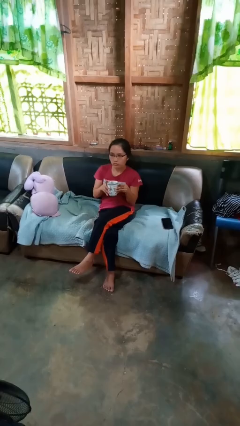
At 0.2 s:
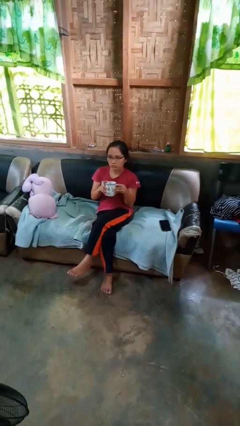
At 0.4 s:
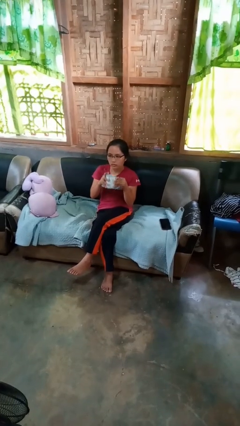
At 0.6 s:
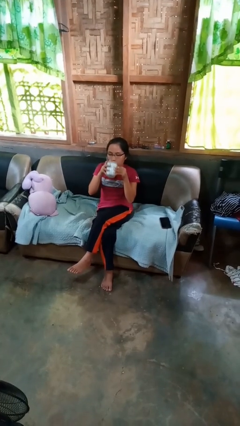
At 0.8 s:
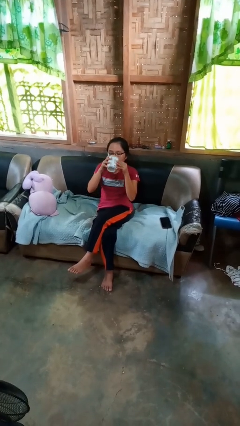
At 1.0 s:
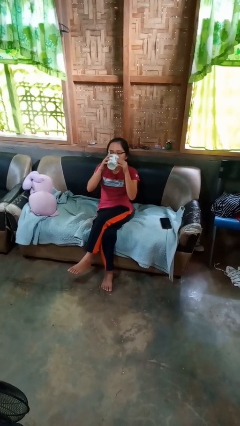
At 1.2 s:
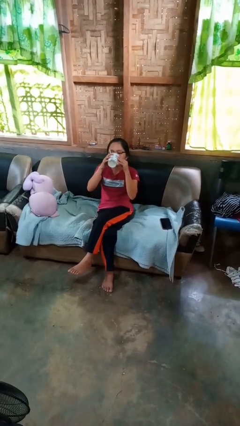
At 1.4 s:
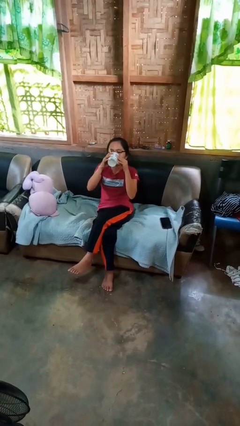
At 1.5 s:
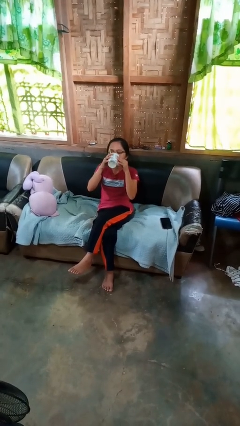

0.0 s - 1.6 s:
person drinks from mug

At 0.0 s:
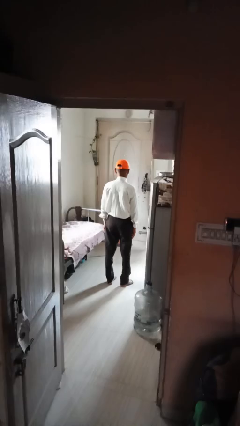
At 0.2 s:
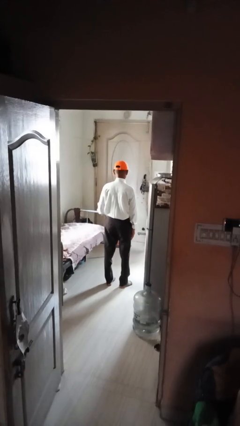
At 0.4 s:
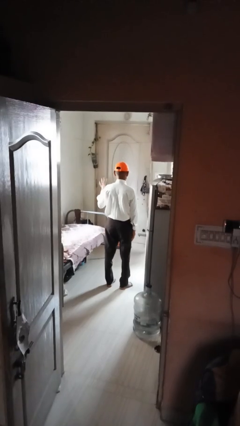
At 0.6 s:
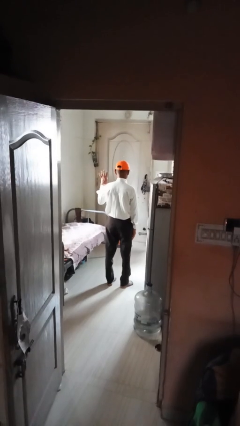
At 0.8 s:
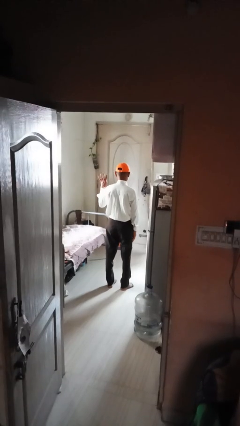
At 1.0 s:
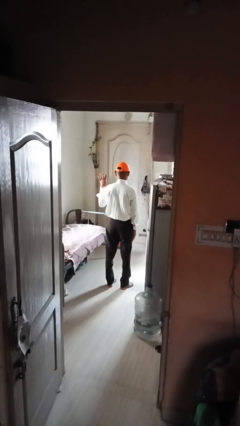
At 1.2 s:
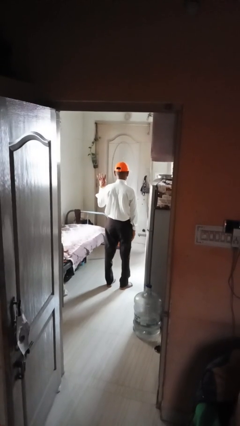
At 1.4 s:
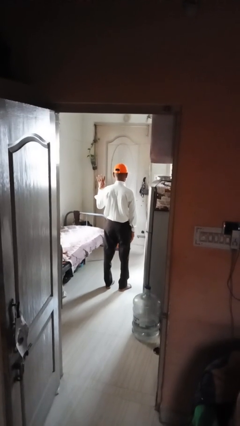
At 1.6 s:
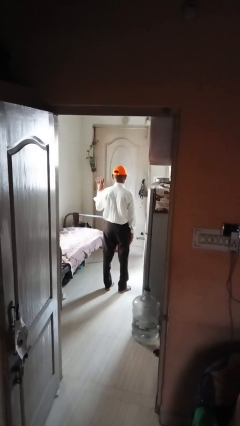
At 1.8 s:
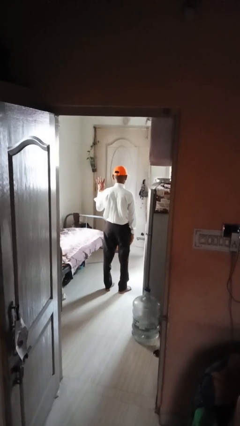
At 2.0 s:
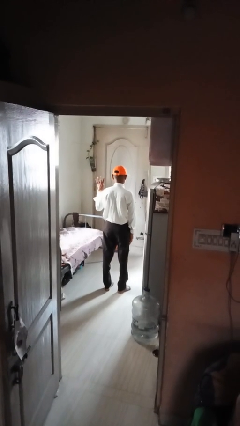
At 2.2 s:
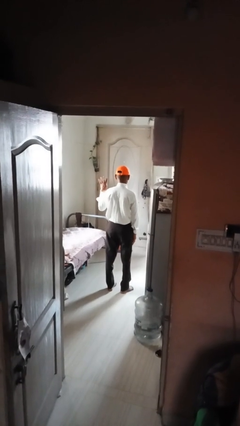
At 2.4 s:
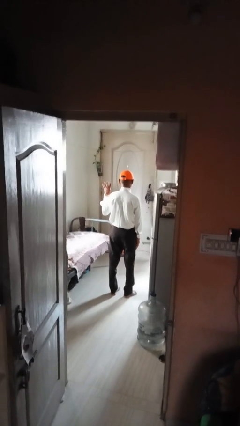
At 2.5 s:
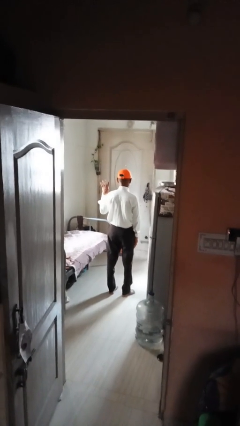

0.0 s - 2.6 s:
person gestures number four

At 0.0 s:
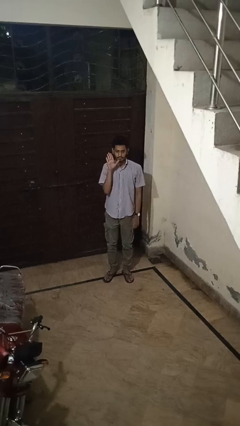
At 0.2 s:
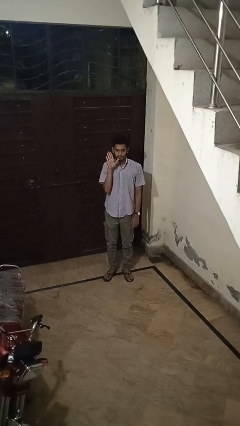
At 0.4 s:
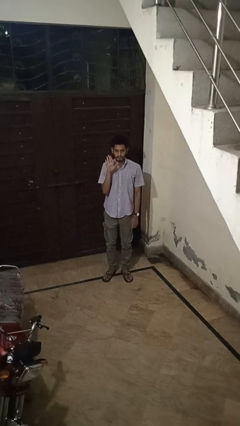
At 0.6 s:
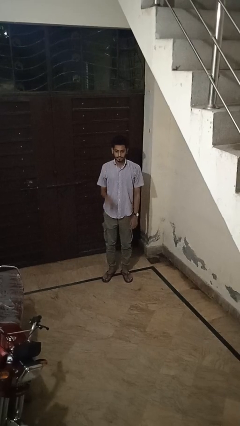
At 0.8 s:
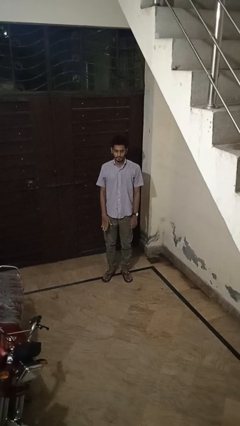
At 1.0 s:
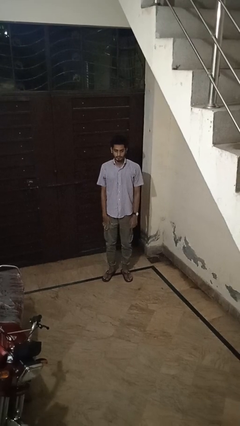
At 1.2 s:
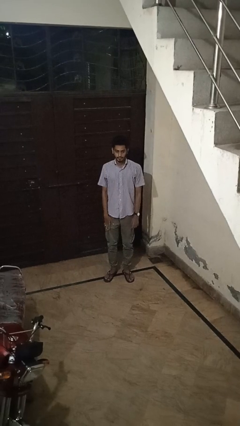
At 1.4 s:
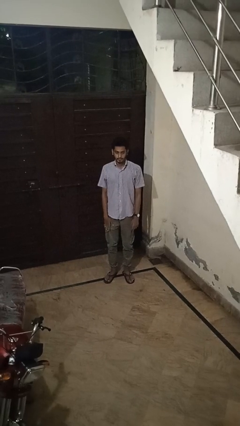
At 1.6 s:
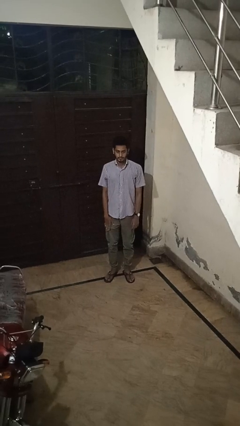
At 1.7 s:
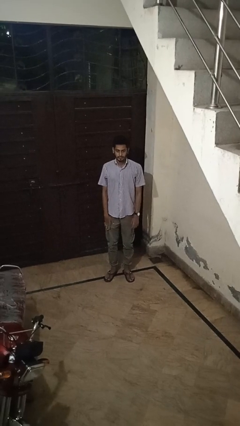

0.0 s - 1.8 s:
person gestures lower hand

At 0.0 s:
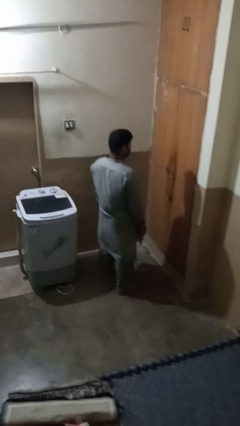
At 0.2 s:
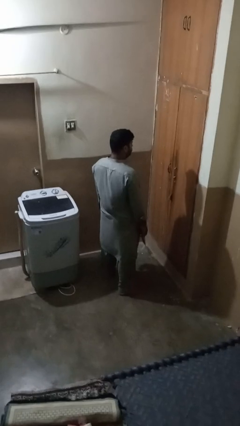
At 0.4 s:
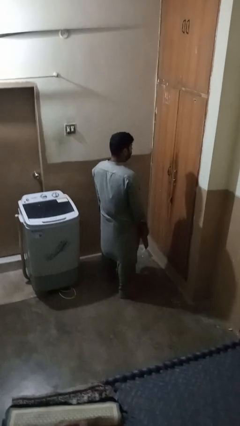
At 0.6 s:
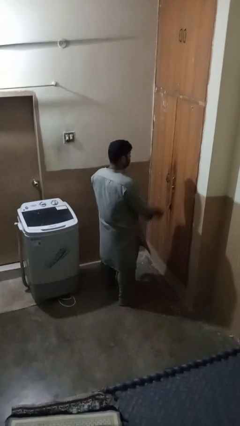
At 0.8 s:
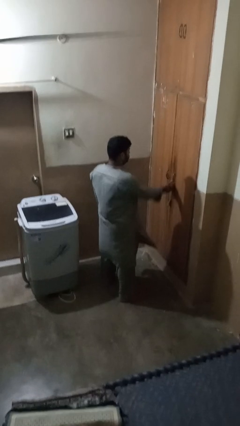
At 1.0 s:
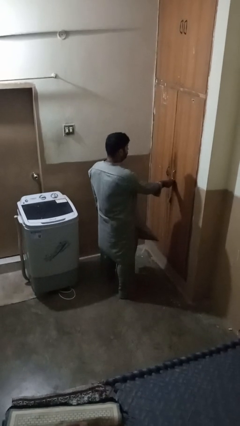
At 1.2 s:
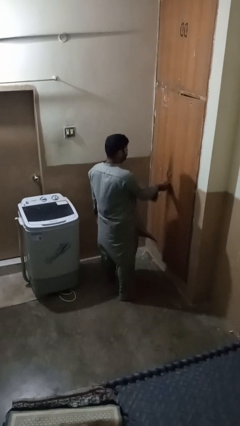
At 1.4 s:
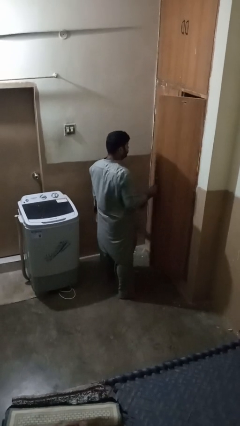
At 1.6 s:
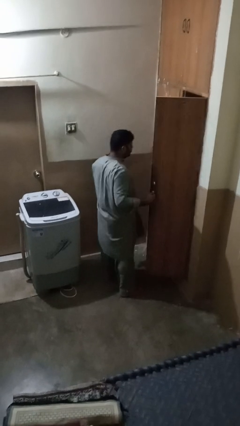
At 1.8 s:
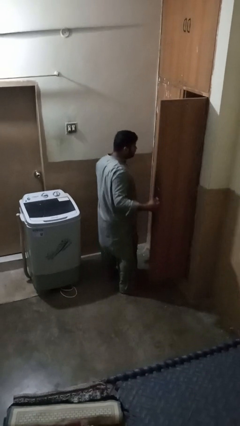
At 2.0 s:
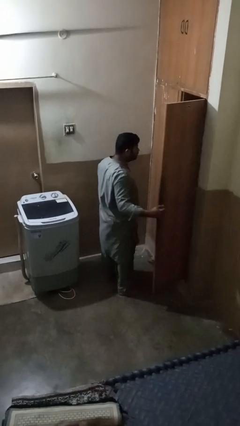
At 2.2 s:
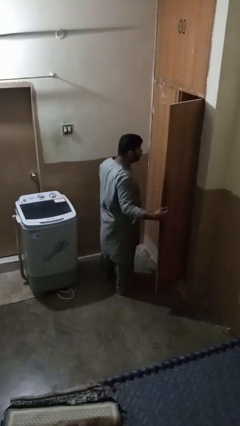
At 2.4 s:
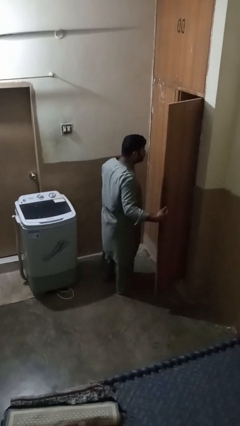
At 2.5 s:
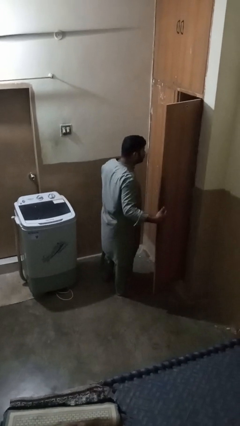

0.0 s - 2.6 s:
person opens closet door

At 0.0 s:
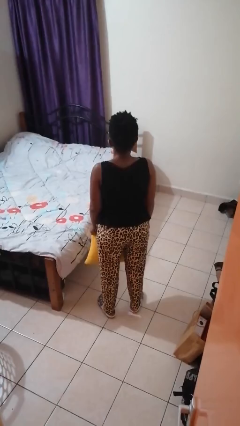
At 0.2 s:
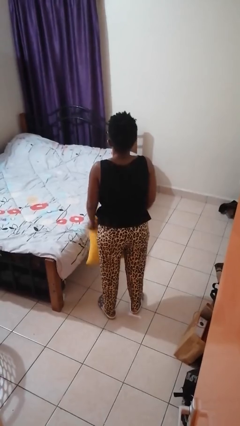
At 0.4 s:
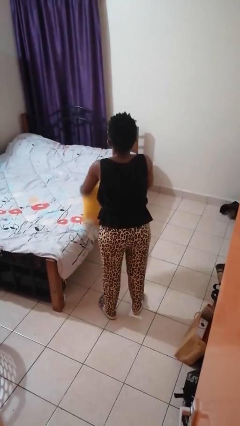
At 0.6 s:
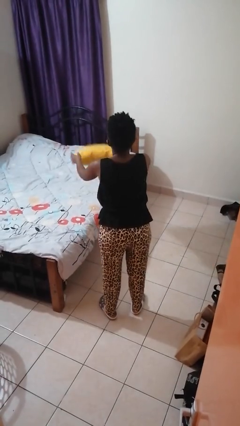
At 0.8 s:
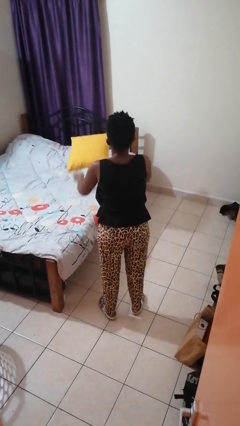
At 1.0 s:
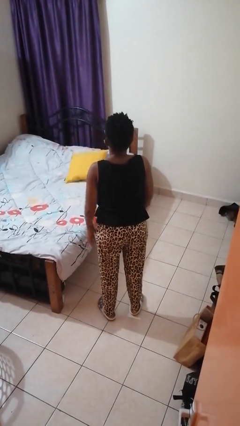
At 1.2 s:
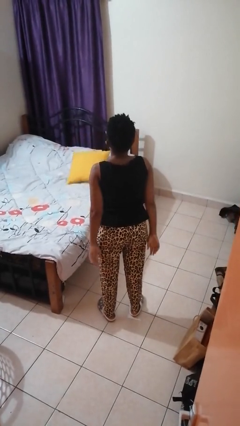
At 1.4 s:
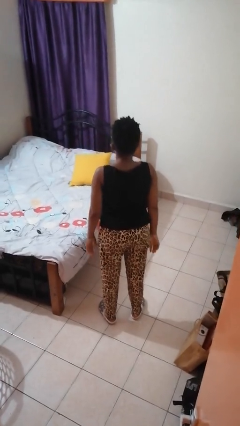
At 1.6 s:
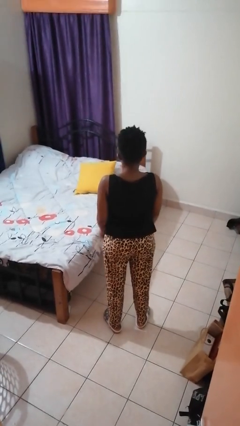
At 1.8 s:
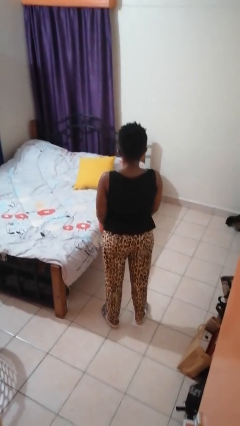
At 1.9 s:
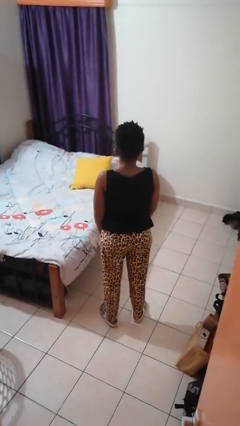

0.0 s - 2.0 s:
person throws object on bed

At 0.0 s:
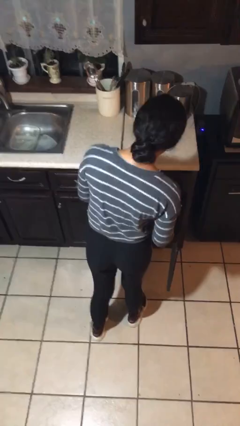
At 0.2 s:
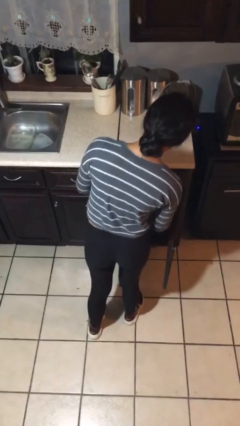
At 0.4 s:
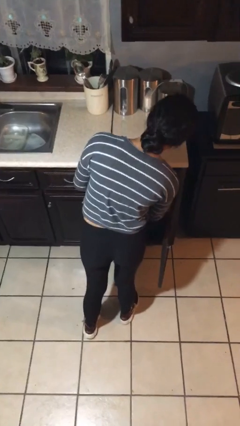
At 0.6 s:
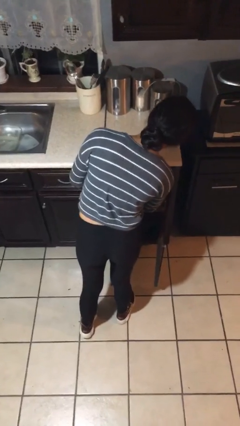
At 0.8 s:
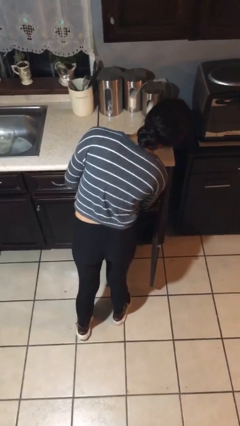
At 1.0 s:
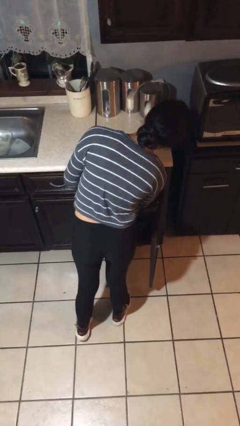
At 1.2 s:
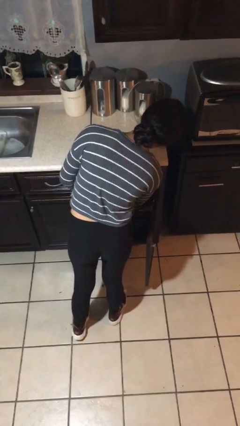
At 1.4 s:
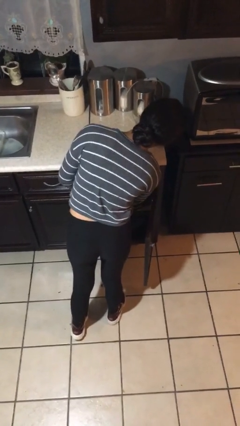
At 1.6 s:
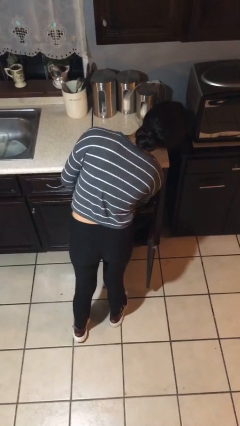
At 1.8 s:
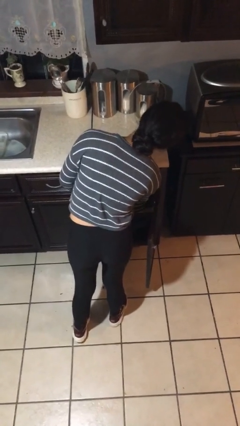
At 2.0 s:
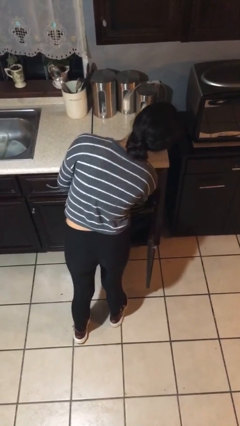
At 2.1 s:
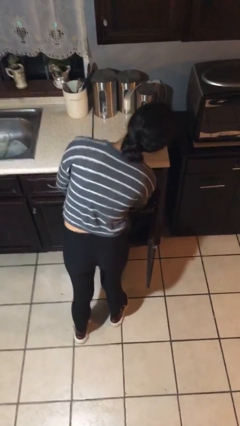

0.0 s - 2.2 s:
person takes object from cabinet

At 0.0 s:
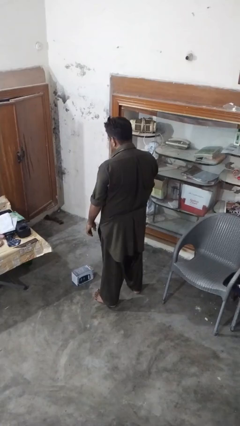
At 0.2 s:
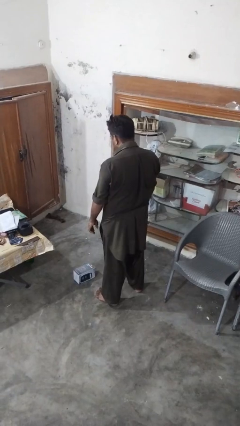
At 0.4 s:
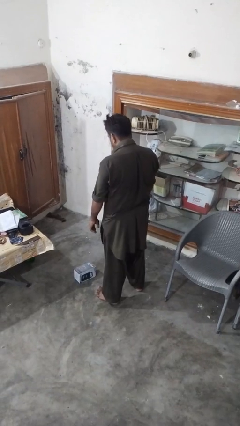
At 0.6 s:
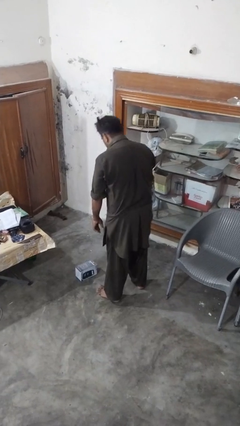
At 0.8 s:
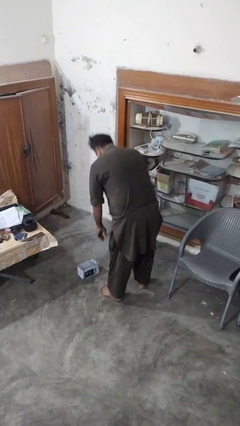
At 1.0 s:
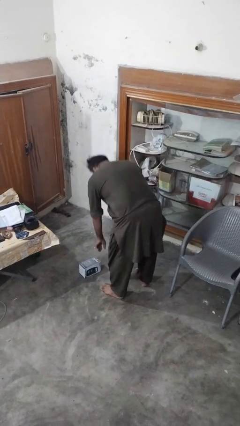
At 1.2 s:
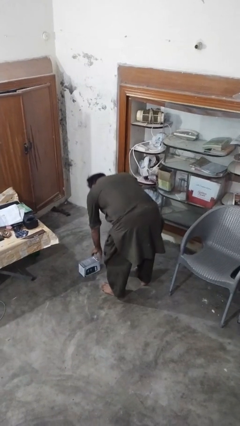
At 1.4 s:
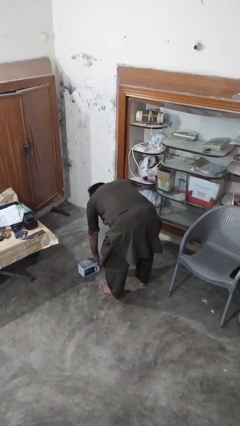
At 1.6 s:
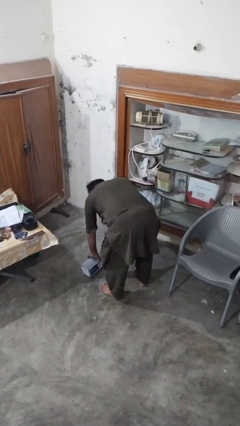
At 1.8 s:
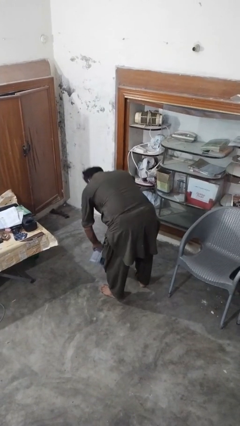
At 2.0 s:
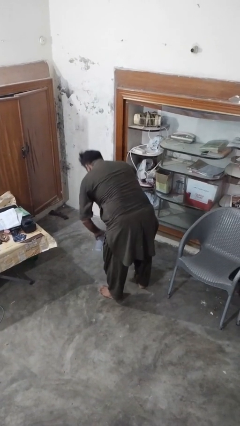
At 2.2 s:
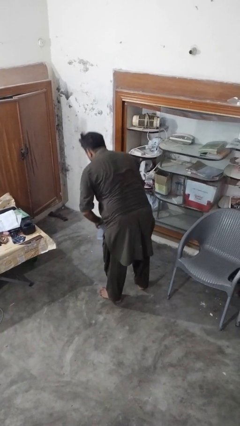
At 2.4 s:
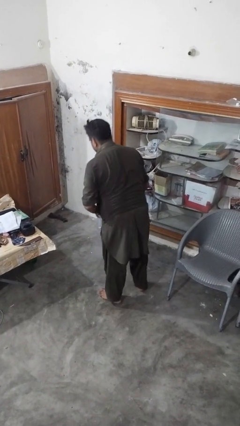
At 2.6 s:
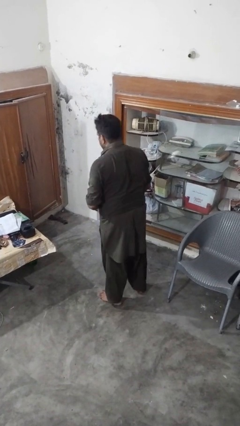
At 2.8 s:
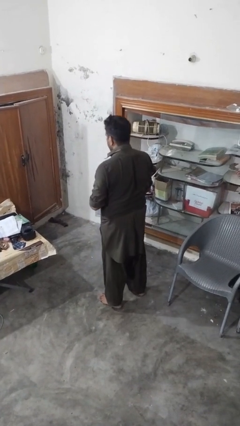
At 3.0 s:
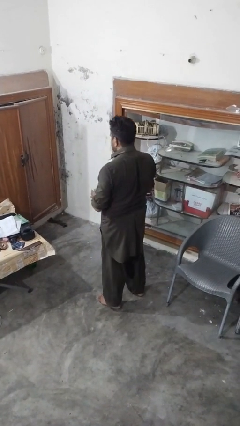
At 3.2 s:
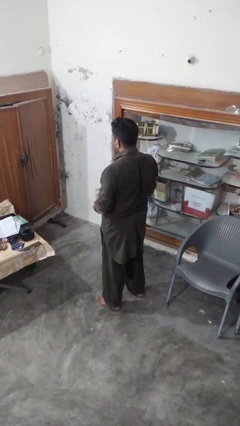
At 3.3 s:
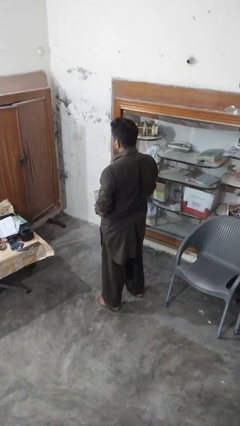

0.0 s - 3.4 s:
person picks up object from floor

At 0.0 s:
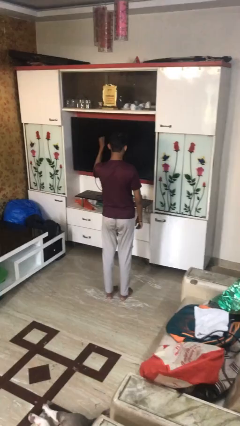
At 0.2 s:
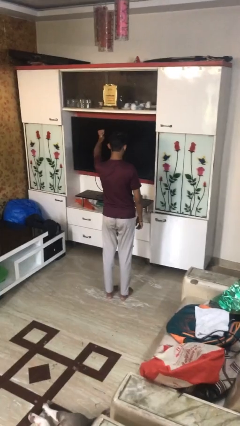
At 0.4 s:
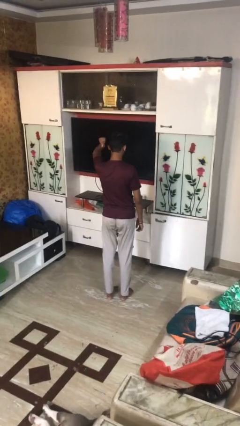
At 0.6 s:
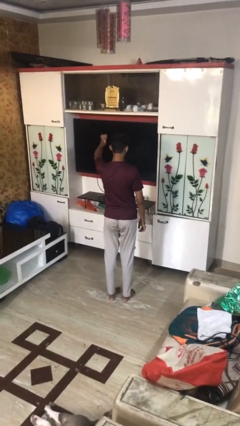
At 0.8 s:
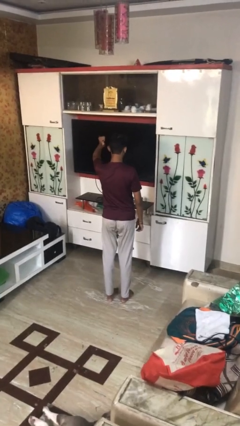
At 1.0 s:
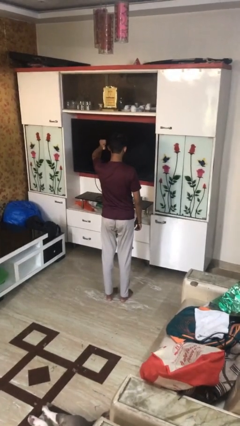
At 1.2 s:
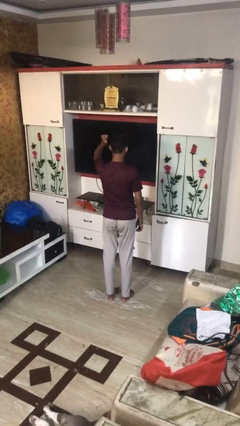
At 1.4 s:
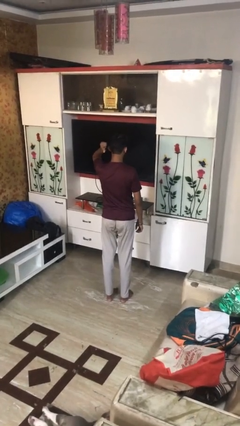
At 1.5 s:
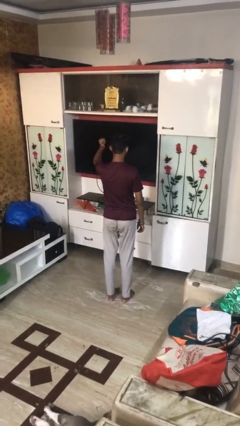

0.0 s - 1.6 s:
person gestures behind me
